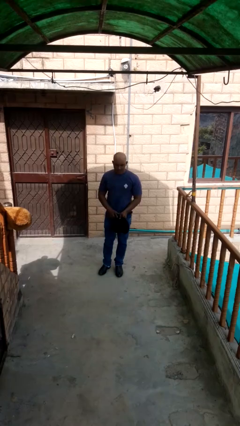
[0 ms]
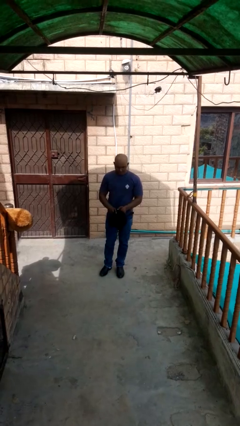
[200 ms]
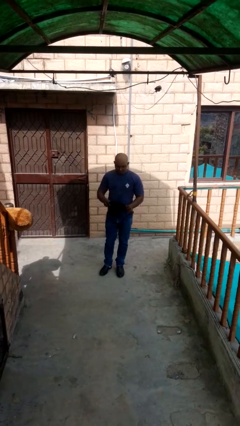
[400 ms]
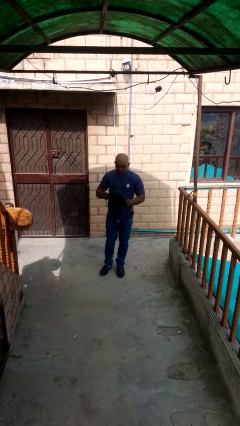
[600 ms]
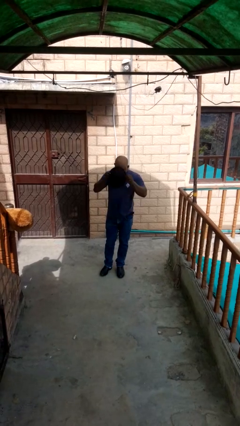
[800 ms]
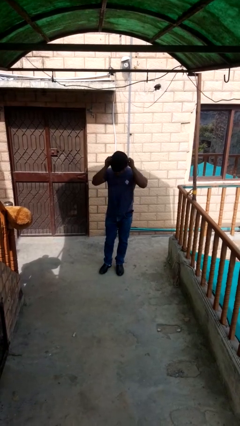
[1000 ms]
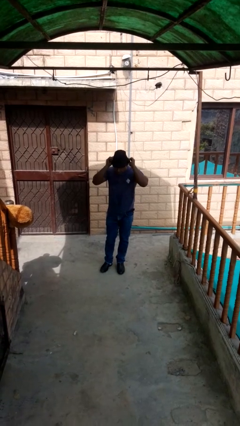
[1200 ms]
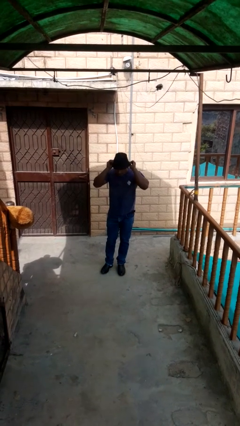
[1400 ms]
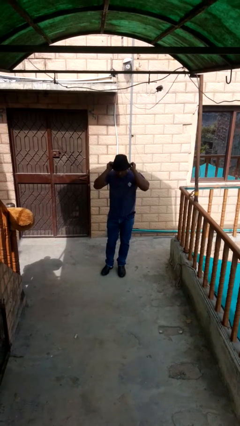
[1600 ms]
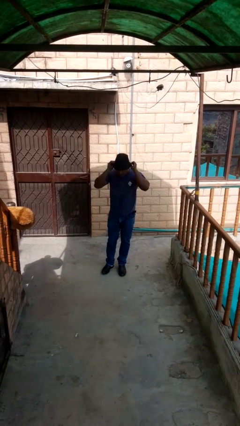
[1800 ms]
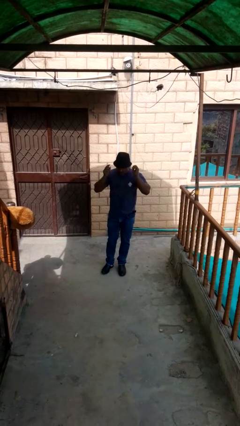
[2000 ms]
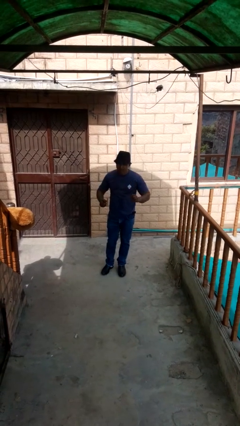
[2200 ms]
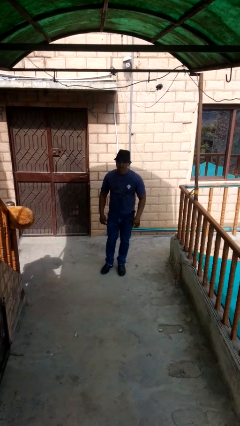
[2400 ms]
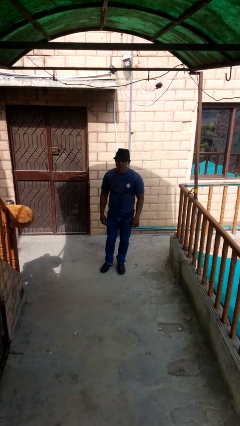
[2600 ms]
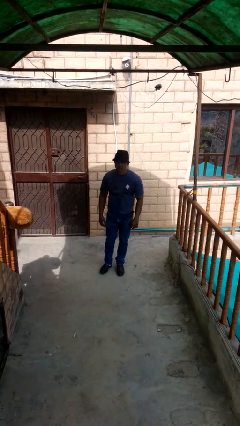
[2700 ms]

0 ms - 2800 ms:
person puts on hat

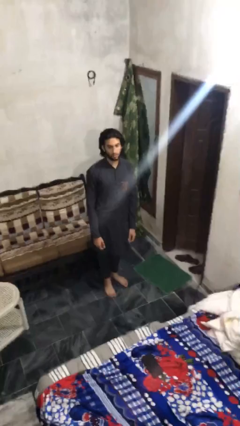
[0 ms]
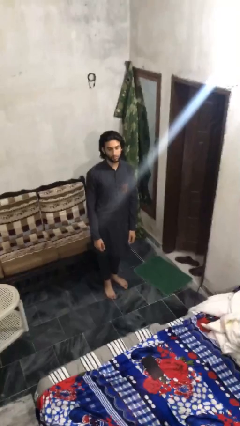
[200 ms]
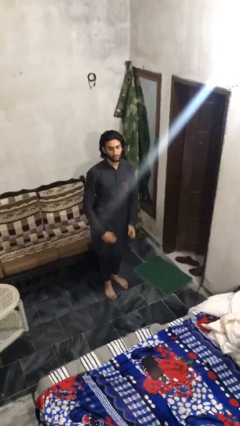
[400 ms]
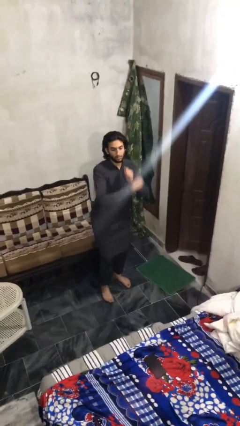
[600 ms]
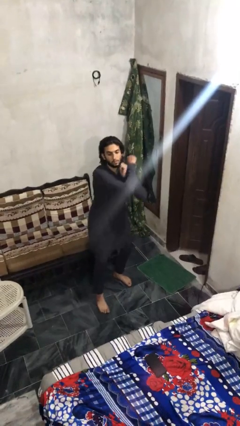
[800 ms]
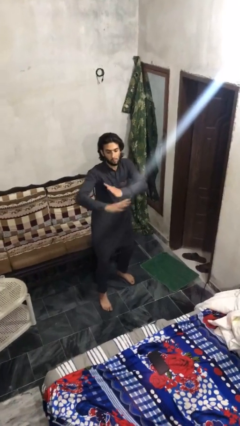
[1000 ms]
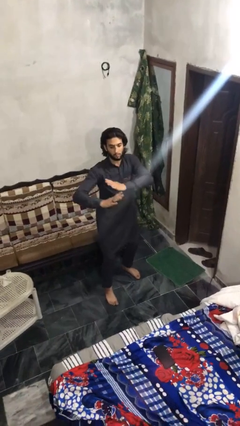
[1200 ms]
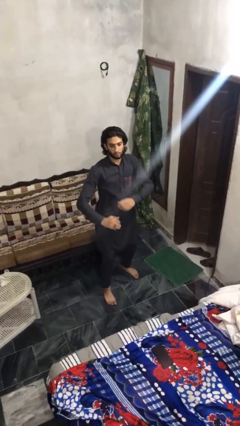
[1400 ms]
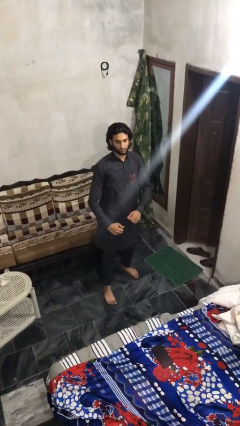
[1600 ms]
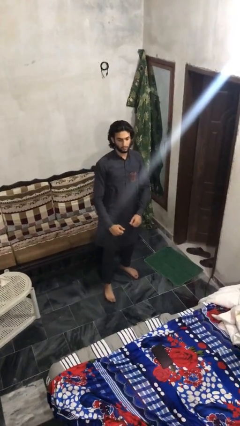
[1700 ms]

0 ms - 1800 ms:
person karate chop

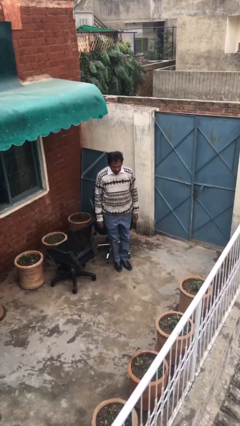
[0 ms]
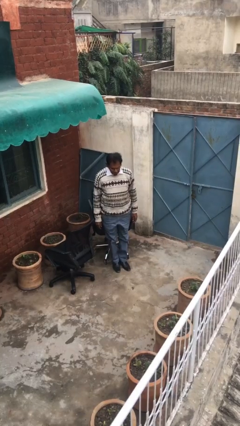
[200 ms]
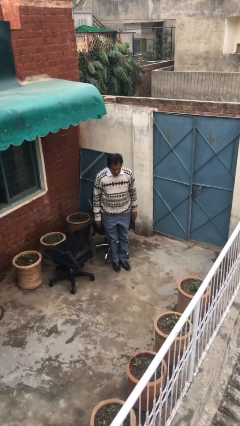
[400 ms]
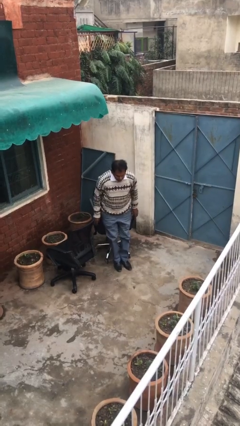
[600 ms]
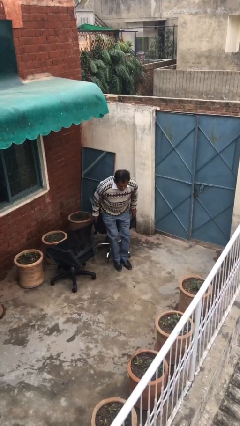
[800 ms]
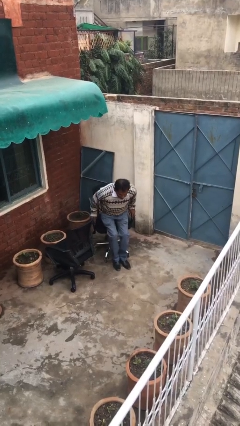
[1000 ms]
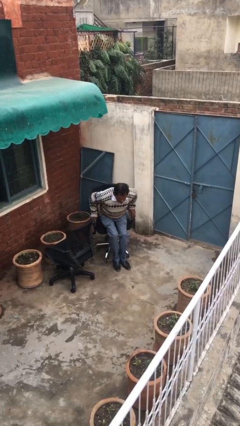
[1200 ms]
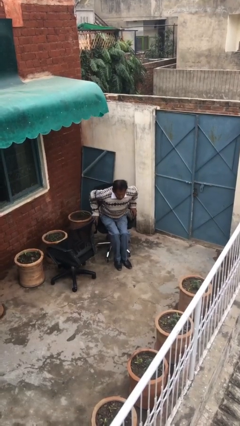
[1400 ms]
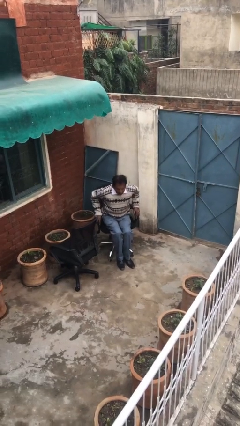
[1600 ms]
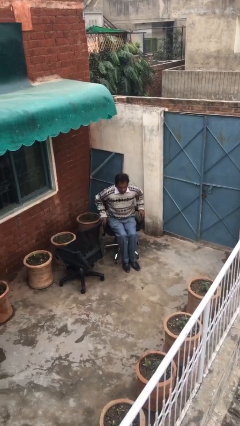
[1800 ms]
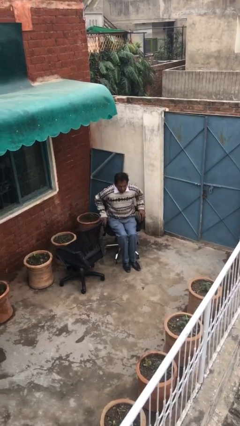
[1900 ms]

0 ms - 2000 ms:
person sits down

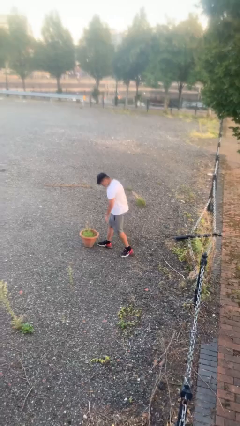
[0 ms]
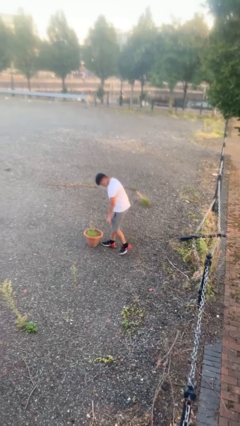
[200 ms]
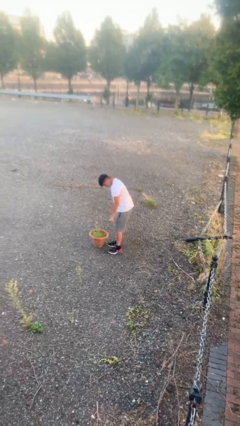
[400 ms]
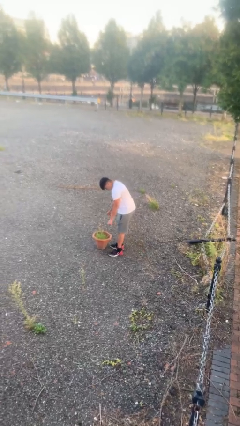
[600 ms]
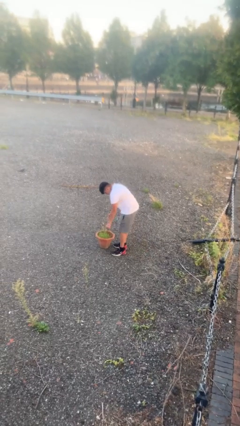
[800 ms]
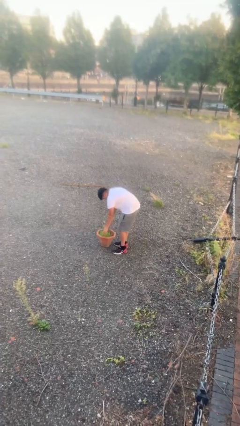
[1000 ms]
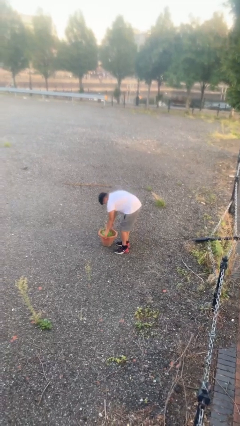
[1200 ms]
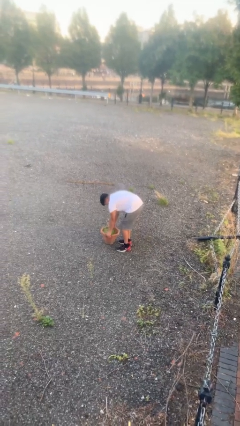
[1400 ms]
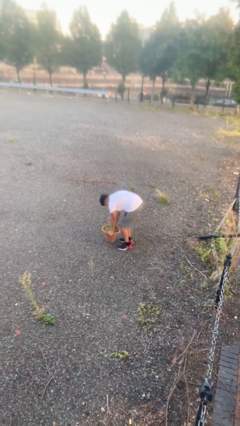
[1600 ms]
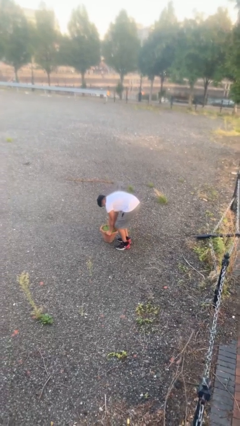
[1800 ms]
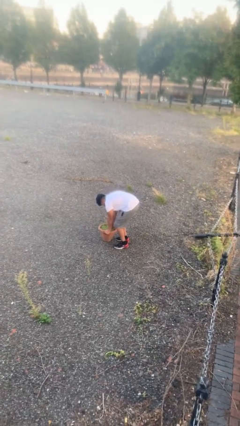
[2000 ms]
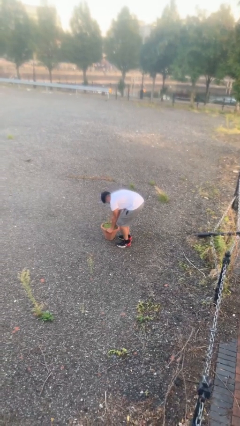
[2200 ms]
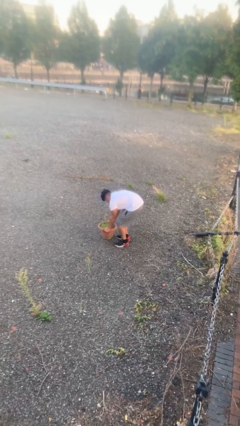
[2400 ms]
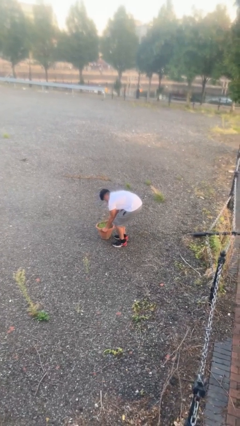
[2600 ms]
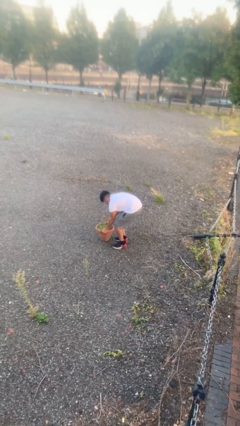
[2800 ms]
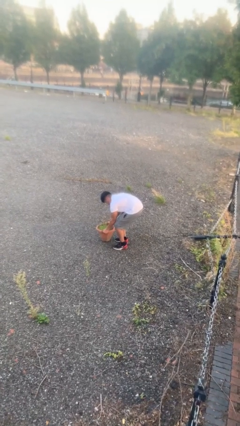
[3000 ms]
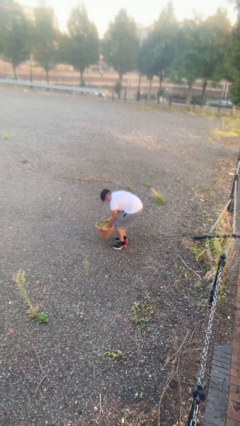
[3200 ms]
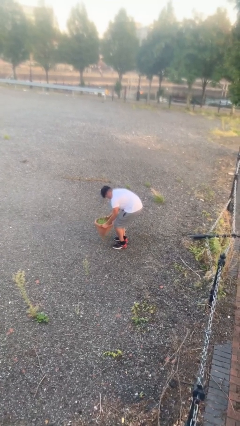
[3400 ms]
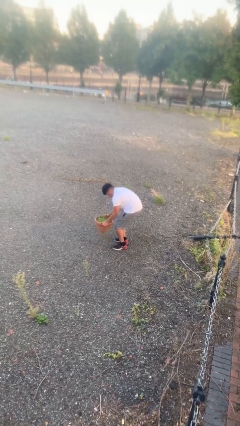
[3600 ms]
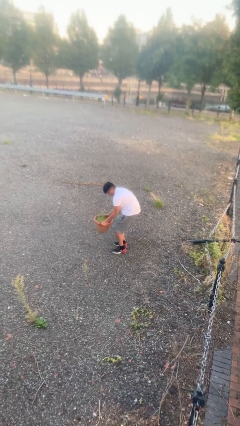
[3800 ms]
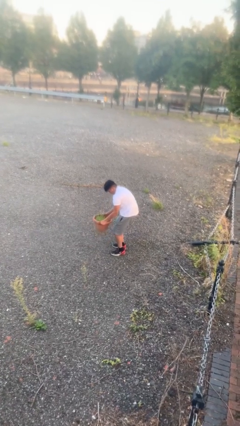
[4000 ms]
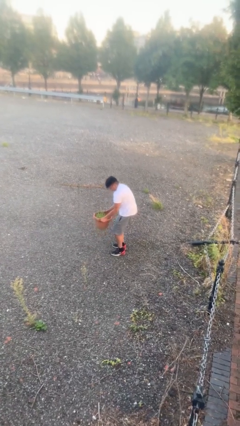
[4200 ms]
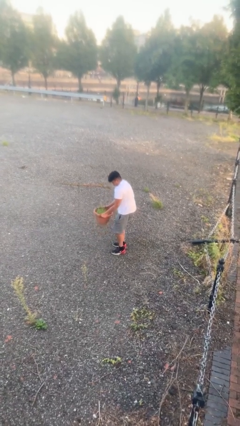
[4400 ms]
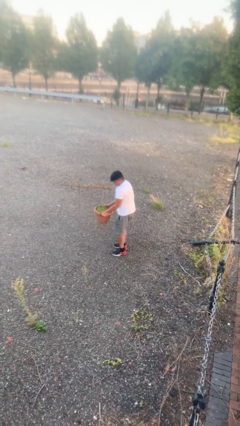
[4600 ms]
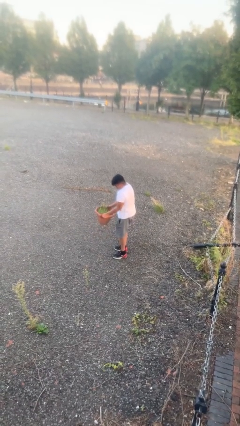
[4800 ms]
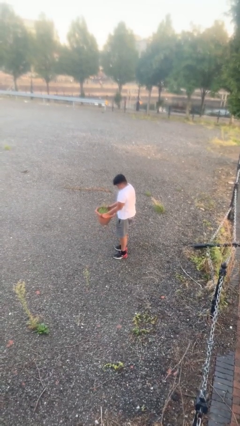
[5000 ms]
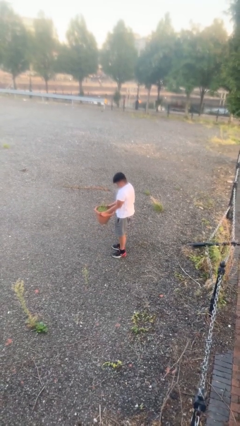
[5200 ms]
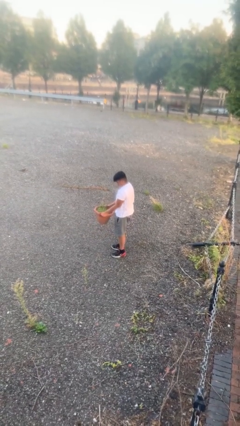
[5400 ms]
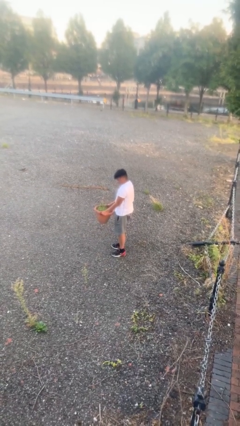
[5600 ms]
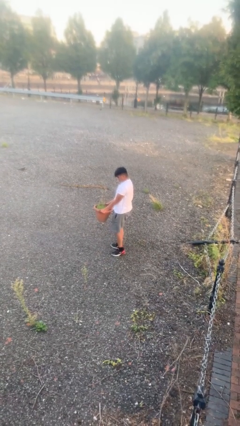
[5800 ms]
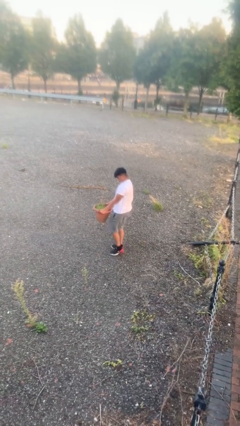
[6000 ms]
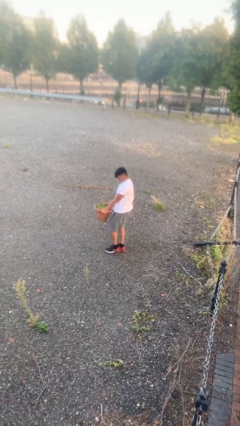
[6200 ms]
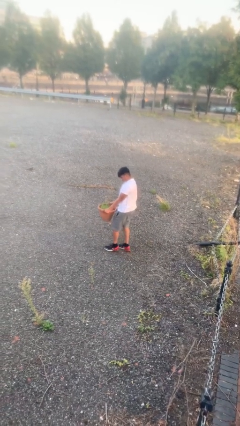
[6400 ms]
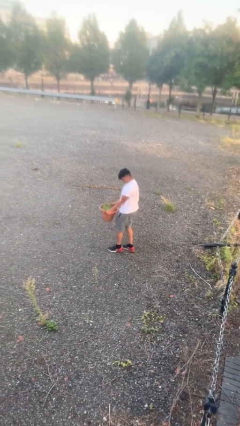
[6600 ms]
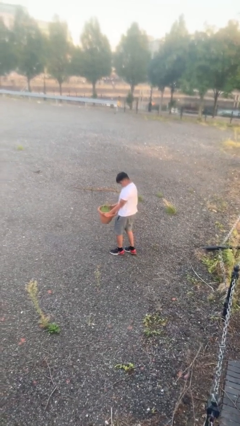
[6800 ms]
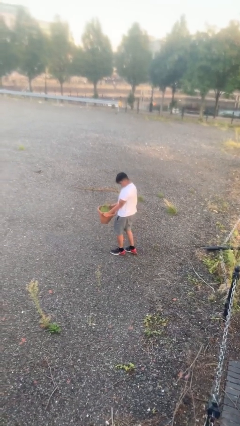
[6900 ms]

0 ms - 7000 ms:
person picks up object from floor

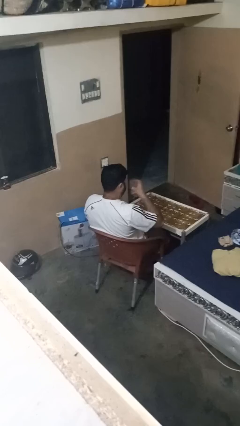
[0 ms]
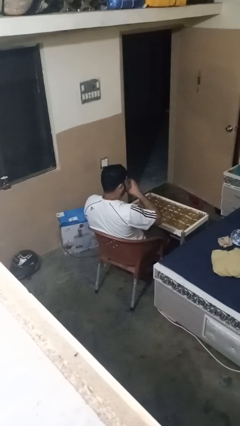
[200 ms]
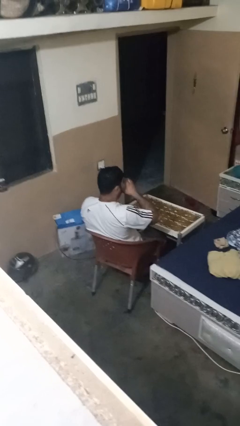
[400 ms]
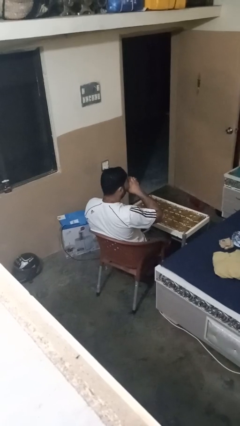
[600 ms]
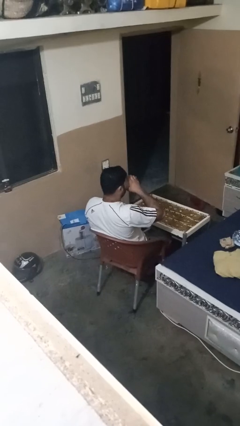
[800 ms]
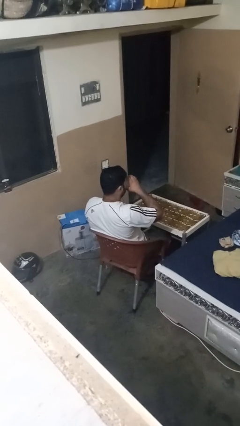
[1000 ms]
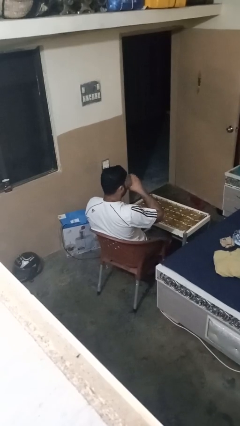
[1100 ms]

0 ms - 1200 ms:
person drinks from shotglass

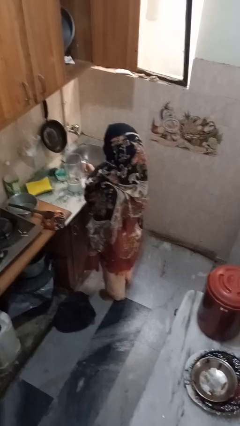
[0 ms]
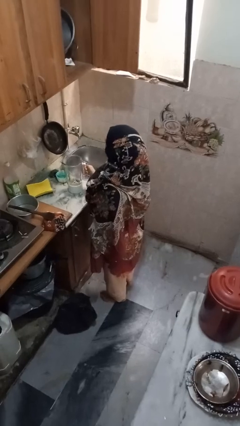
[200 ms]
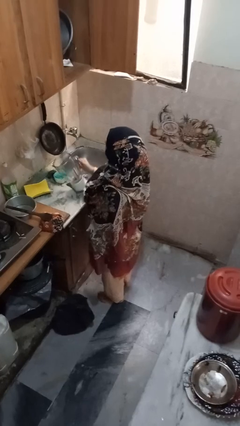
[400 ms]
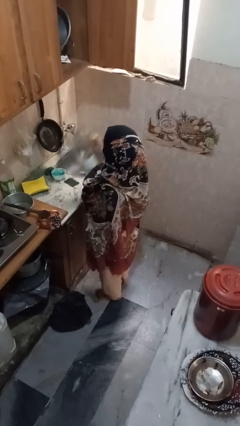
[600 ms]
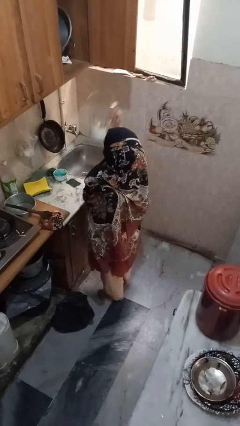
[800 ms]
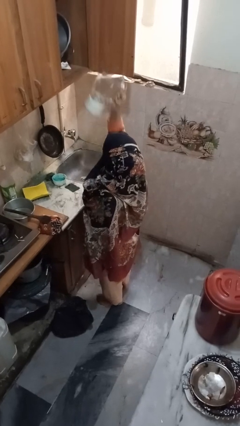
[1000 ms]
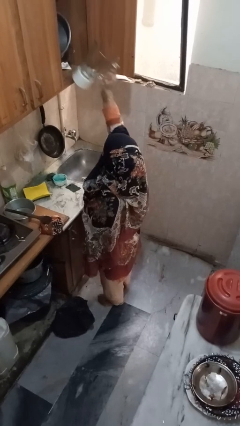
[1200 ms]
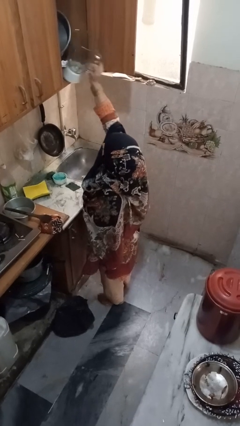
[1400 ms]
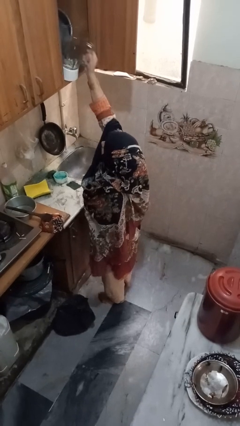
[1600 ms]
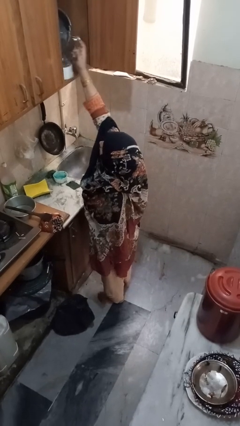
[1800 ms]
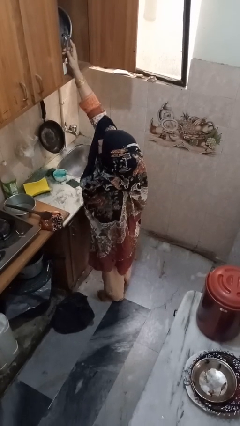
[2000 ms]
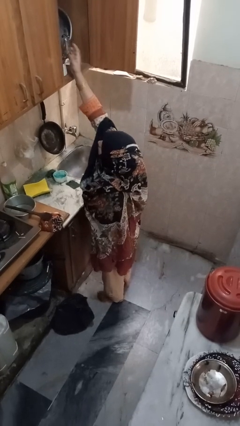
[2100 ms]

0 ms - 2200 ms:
person takes object from cabinet

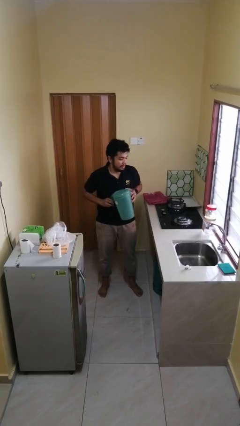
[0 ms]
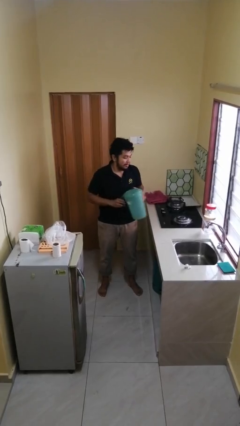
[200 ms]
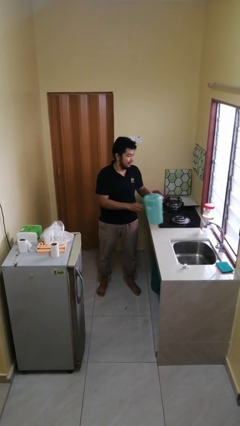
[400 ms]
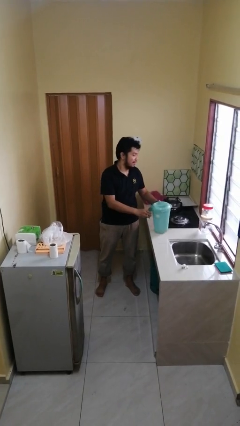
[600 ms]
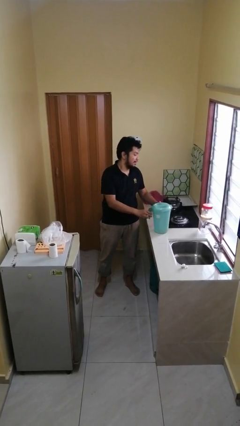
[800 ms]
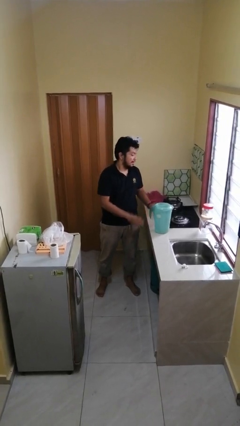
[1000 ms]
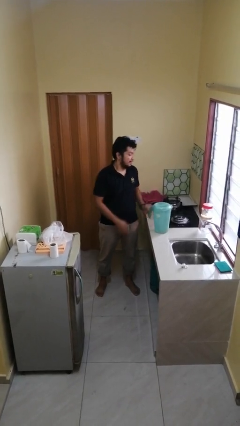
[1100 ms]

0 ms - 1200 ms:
person puts down object on countertop
